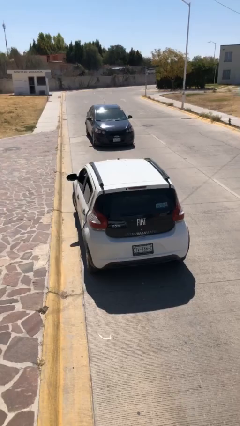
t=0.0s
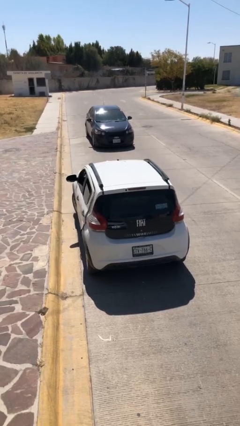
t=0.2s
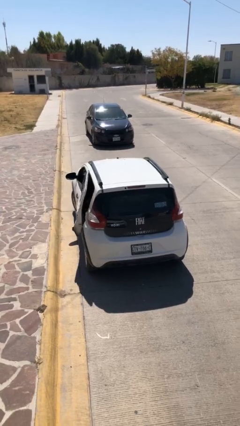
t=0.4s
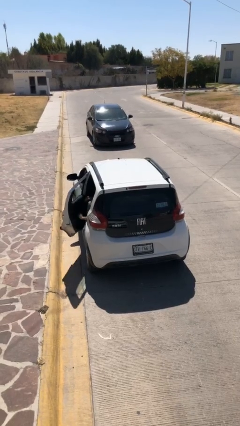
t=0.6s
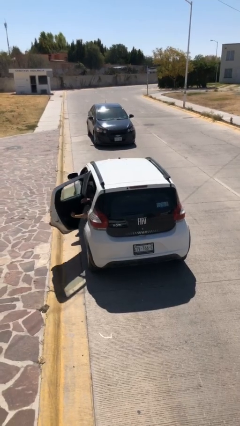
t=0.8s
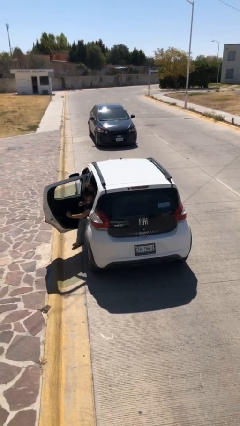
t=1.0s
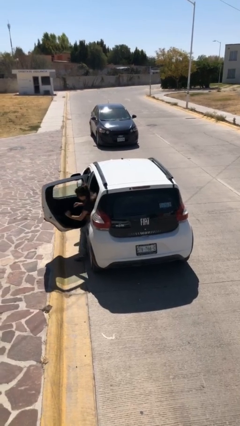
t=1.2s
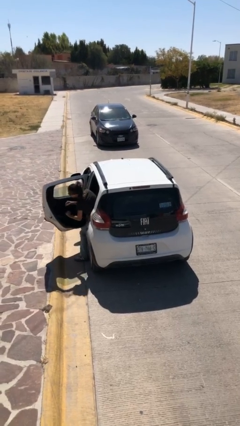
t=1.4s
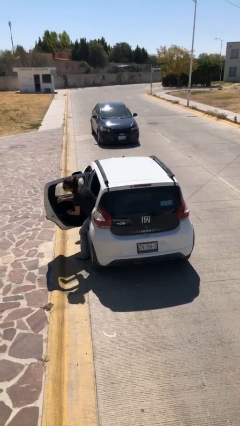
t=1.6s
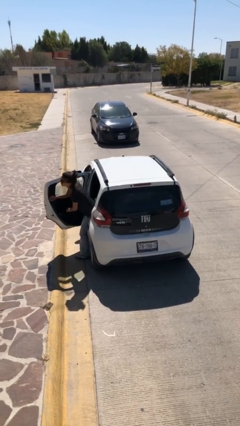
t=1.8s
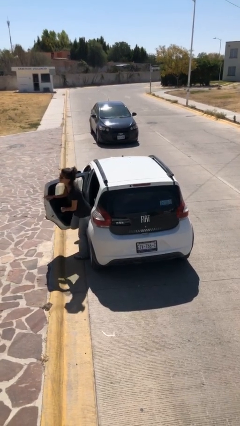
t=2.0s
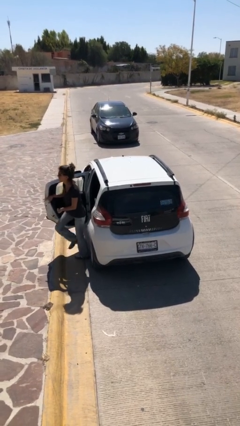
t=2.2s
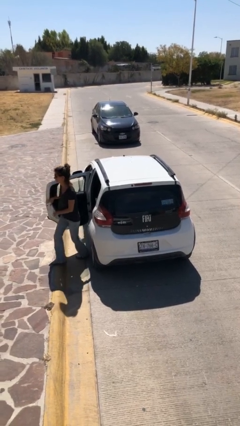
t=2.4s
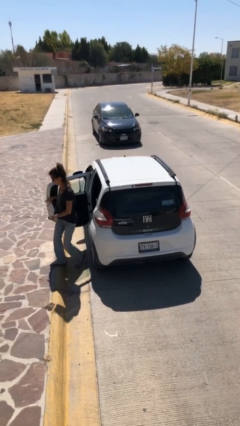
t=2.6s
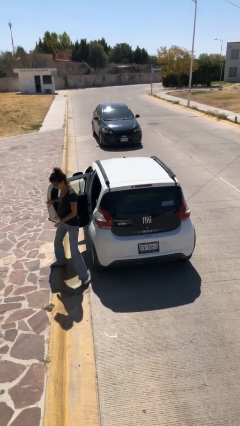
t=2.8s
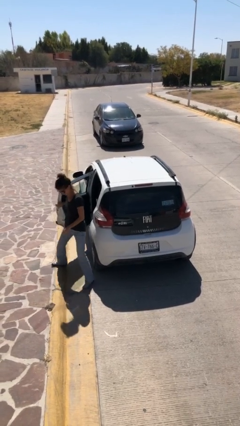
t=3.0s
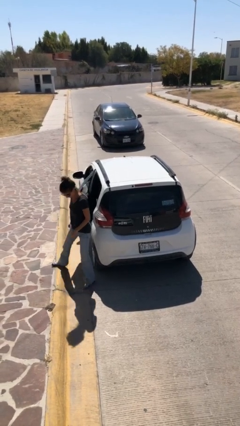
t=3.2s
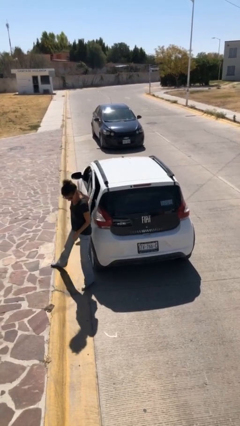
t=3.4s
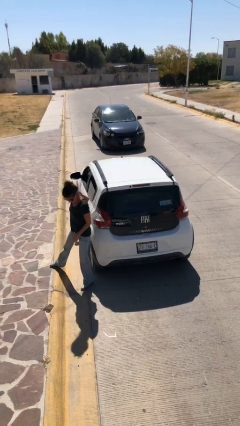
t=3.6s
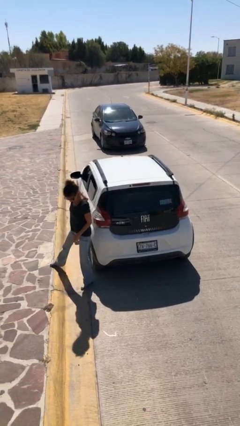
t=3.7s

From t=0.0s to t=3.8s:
car drops off person

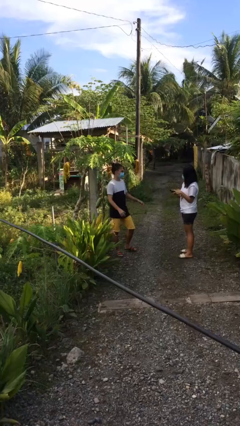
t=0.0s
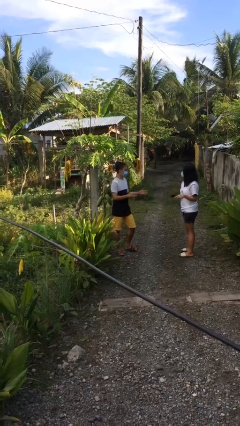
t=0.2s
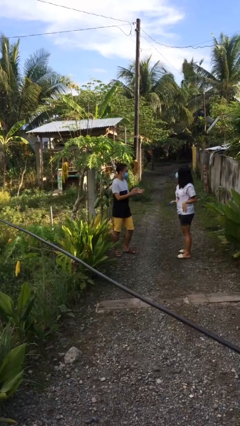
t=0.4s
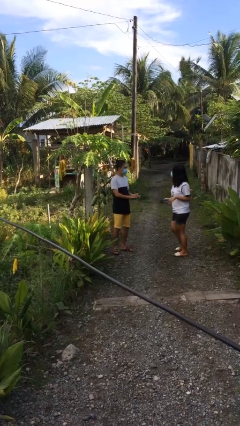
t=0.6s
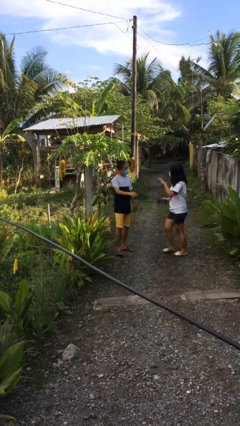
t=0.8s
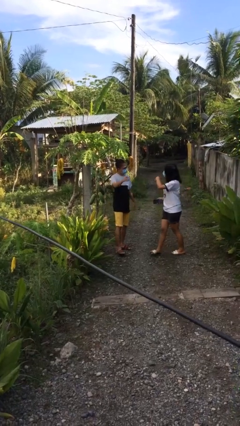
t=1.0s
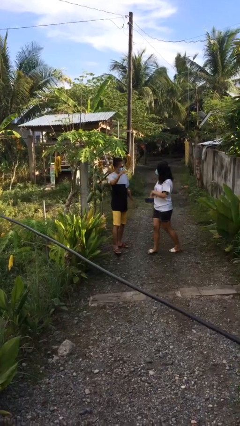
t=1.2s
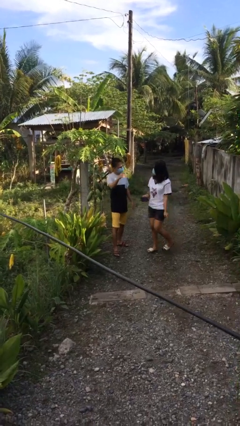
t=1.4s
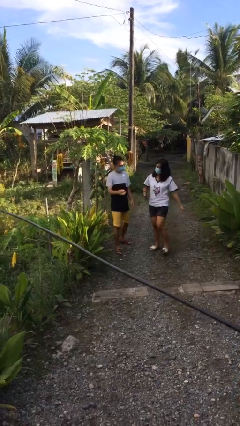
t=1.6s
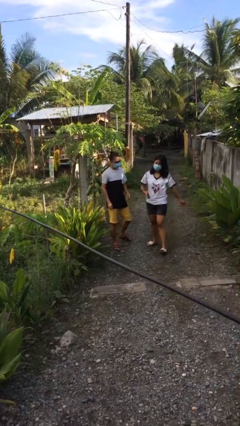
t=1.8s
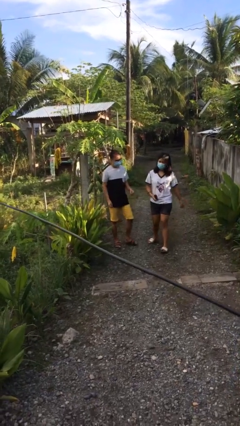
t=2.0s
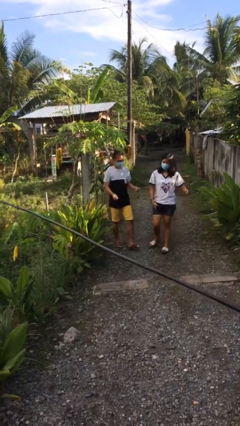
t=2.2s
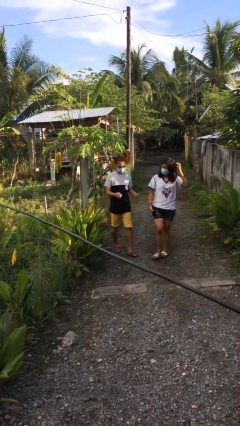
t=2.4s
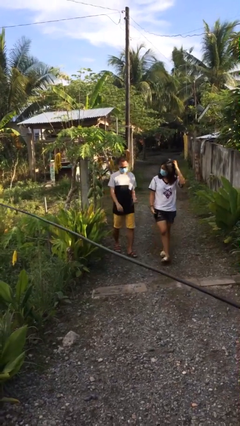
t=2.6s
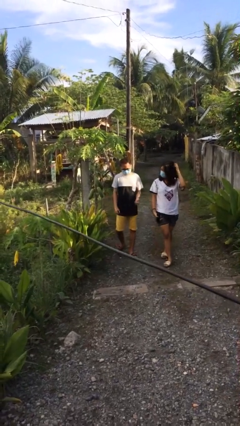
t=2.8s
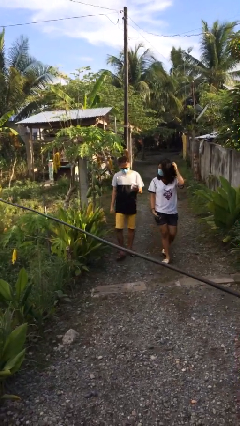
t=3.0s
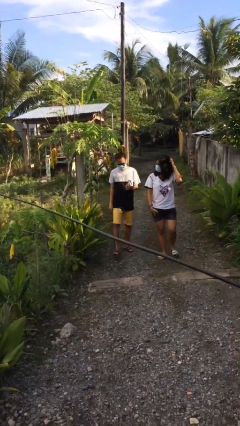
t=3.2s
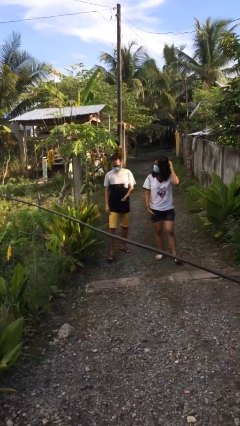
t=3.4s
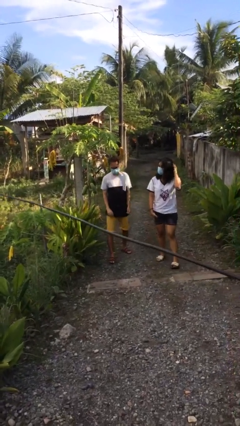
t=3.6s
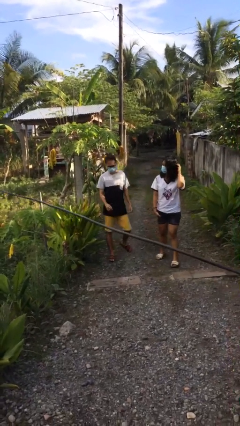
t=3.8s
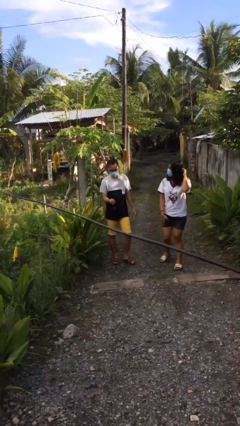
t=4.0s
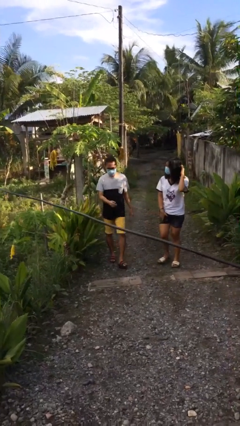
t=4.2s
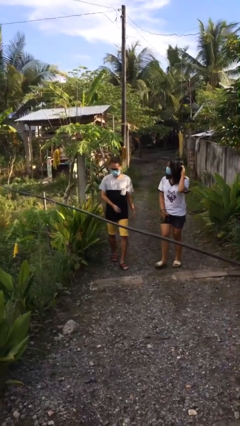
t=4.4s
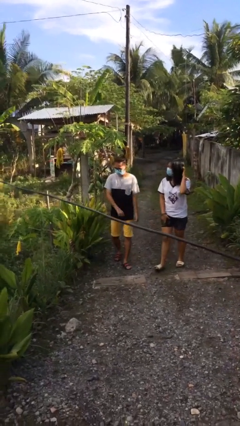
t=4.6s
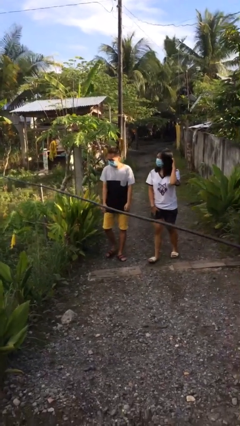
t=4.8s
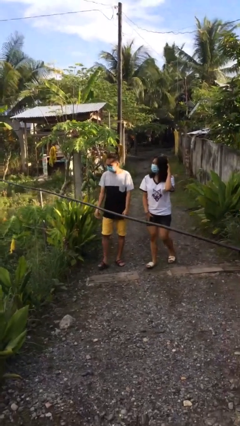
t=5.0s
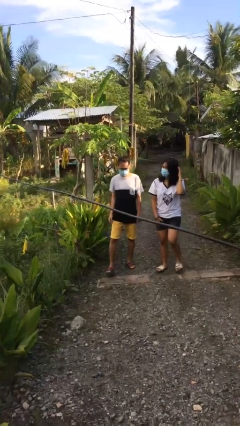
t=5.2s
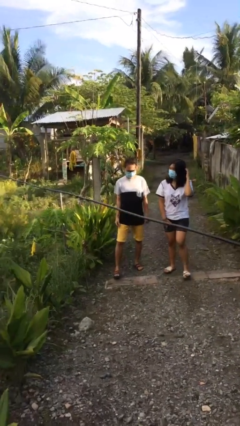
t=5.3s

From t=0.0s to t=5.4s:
person talks to person

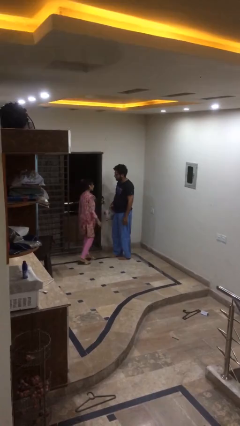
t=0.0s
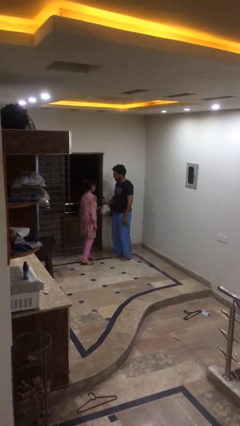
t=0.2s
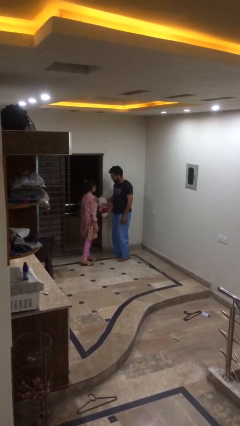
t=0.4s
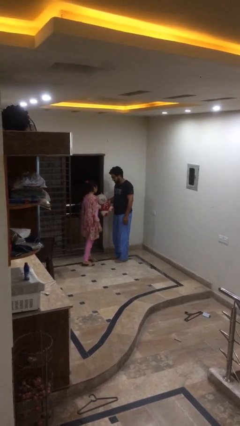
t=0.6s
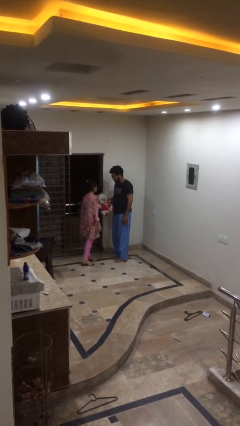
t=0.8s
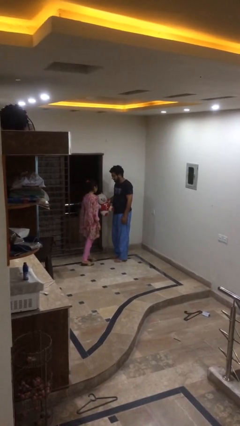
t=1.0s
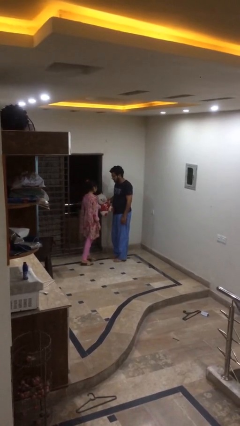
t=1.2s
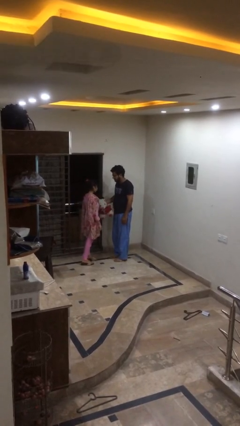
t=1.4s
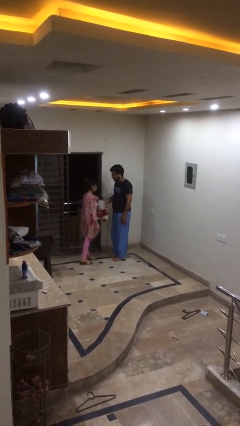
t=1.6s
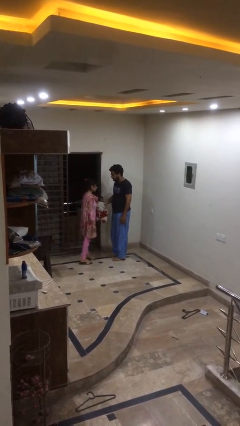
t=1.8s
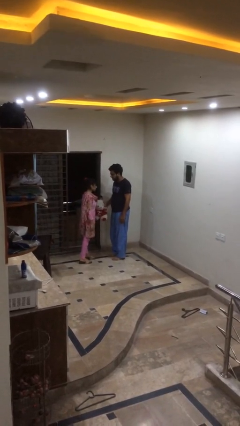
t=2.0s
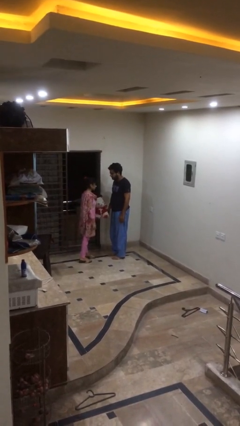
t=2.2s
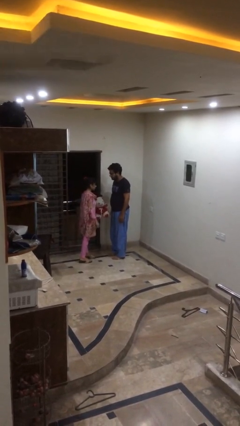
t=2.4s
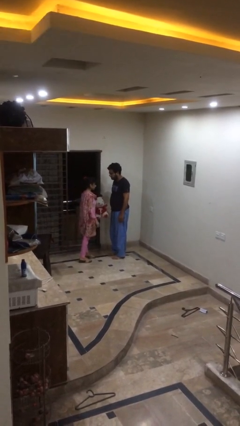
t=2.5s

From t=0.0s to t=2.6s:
person transfers object to person

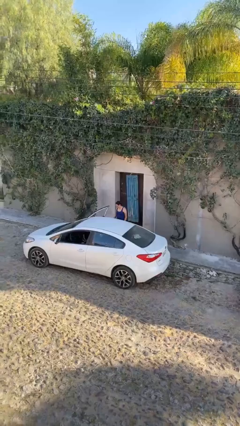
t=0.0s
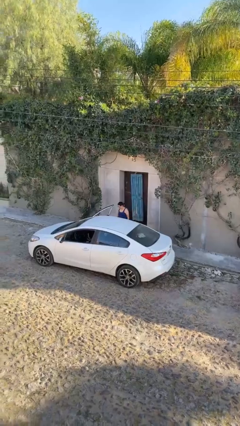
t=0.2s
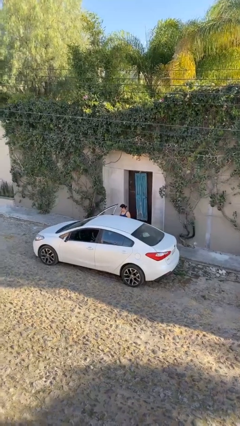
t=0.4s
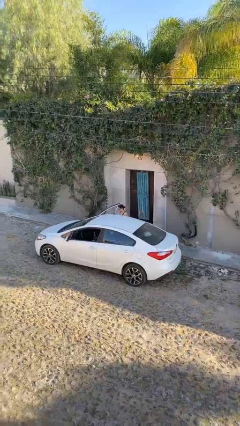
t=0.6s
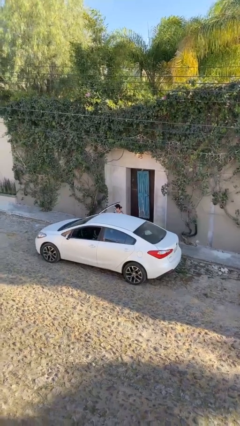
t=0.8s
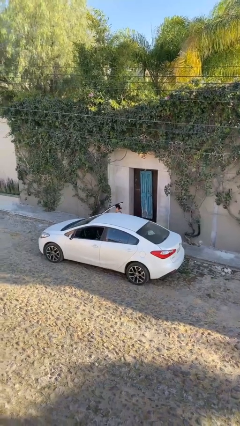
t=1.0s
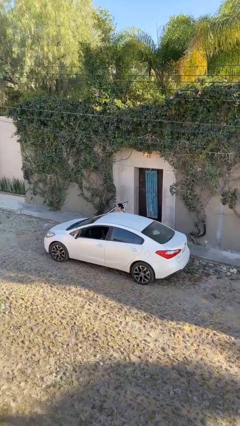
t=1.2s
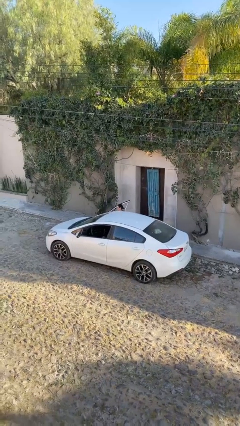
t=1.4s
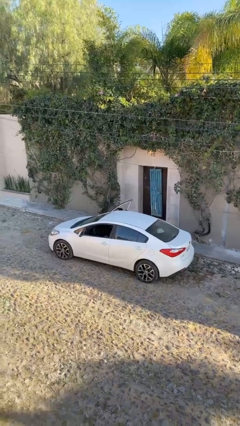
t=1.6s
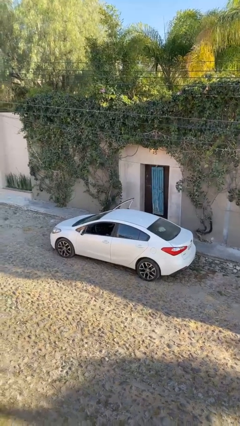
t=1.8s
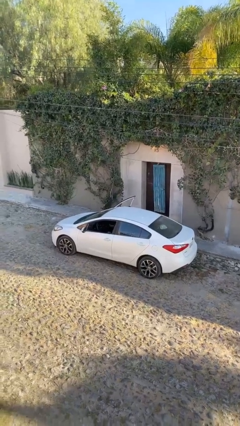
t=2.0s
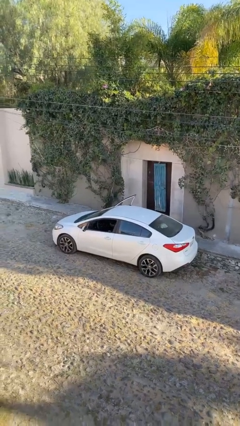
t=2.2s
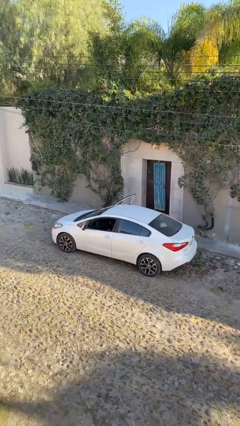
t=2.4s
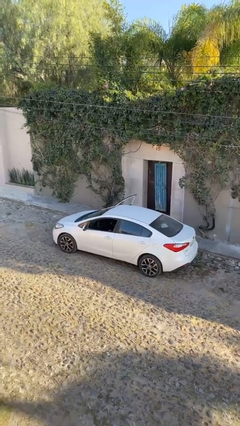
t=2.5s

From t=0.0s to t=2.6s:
person enters car

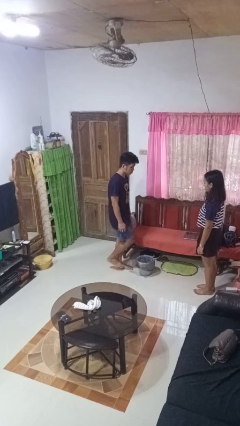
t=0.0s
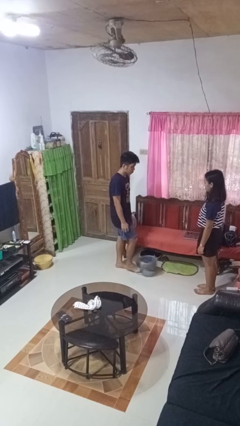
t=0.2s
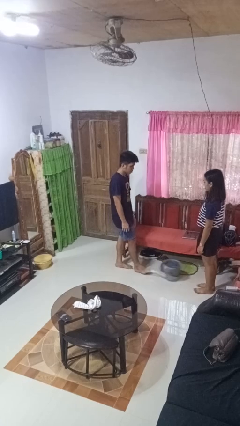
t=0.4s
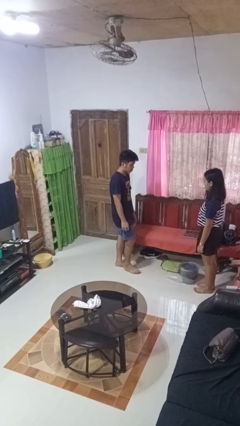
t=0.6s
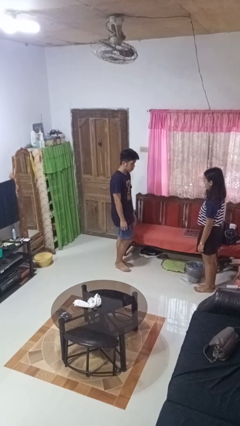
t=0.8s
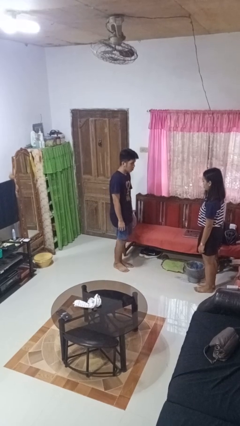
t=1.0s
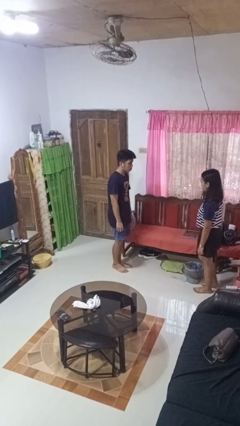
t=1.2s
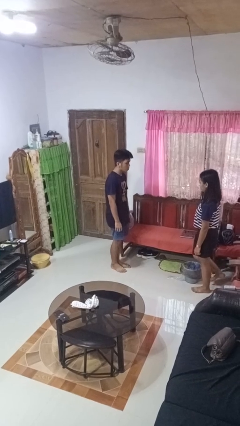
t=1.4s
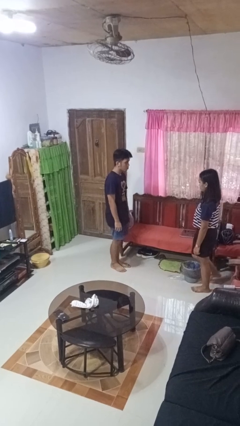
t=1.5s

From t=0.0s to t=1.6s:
person kicks object to person

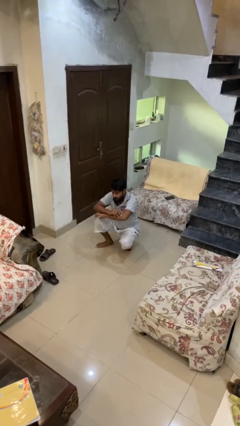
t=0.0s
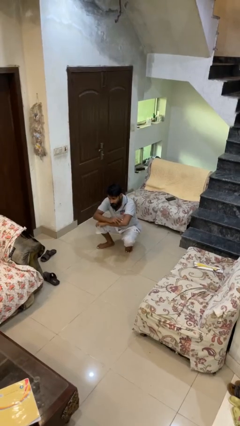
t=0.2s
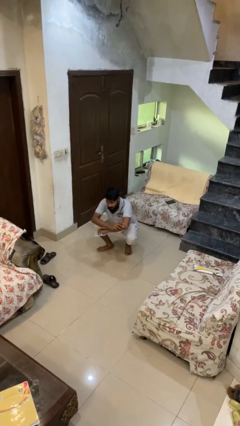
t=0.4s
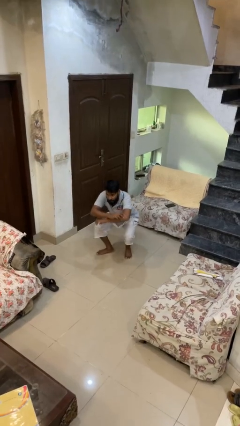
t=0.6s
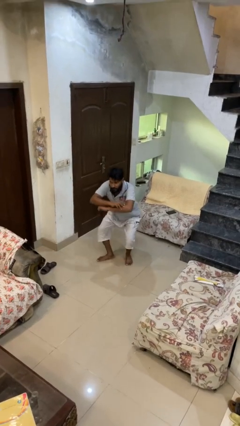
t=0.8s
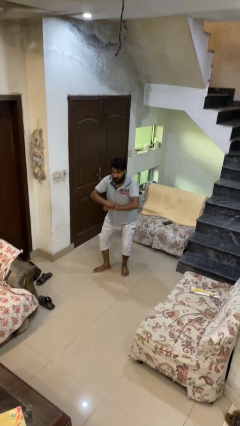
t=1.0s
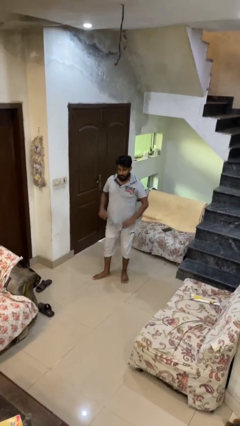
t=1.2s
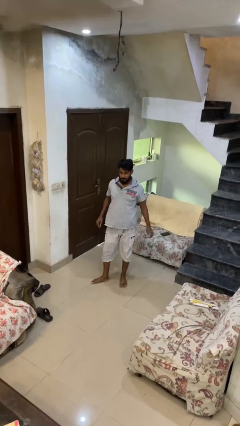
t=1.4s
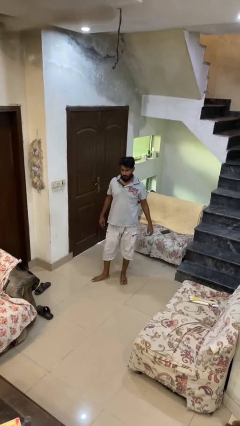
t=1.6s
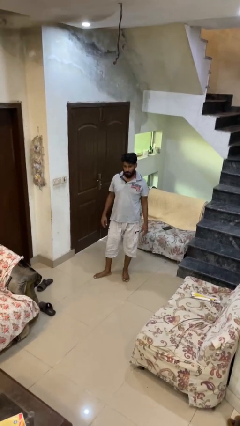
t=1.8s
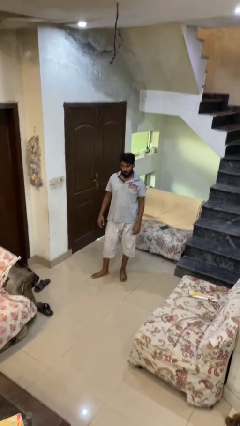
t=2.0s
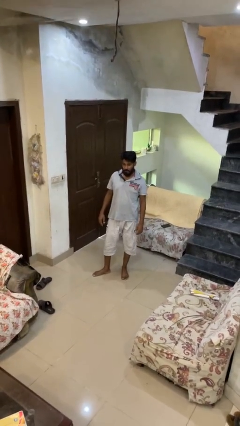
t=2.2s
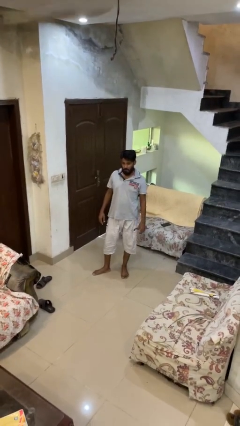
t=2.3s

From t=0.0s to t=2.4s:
person stands up
